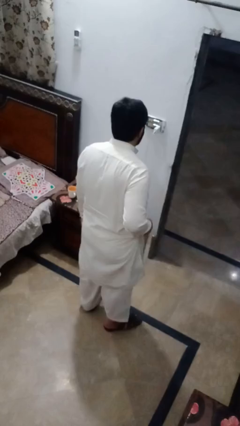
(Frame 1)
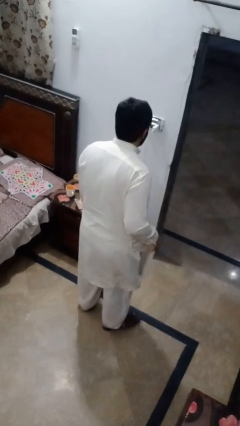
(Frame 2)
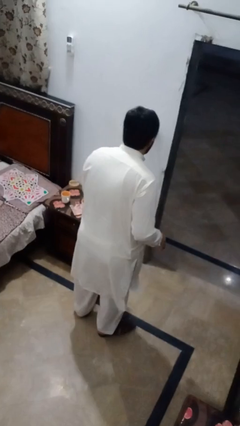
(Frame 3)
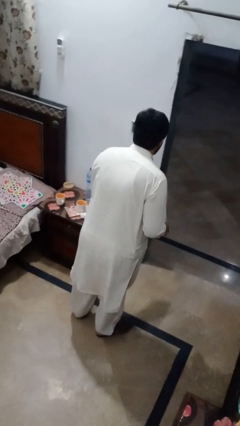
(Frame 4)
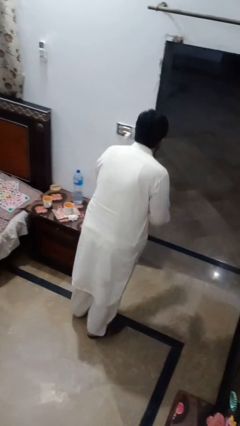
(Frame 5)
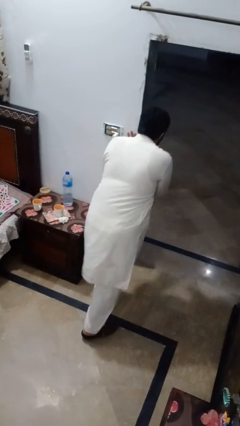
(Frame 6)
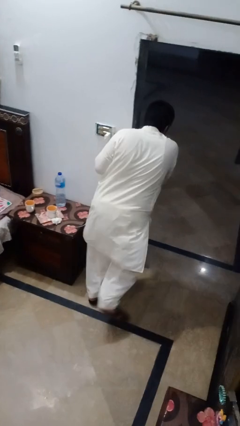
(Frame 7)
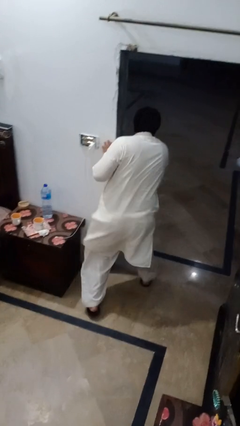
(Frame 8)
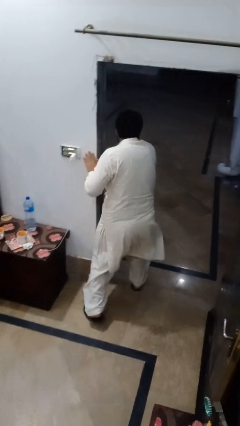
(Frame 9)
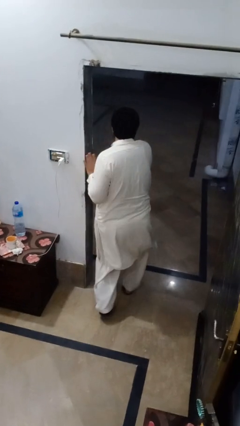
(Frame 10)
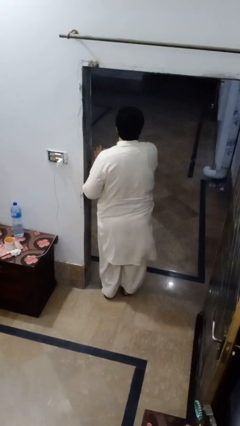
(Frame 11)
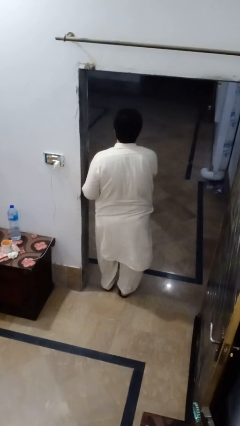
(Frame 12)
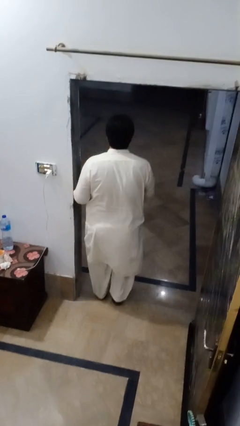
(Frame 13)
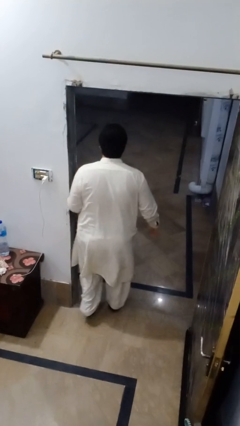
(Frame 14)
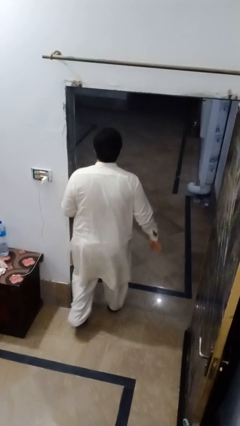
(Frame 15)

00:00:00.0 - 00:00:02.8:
person bumps into wall

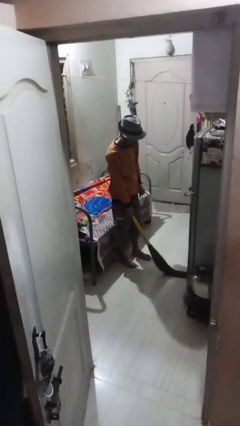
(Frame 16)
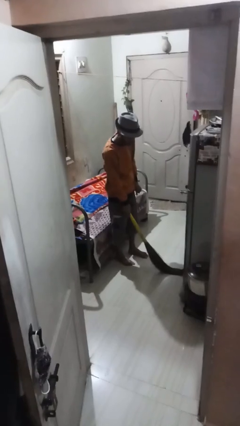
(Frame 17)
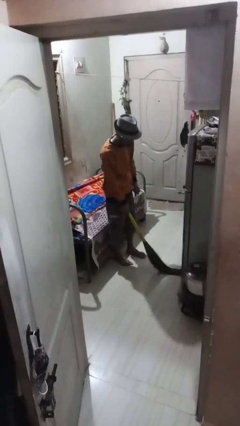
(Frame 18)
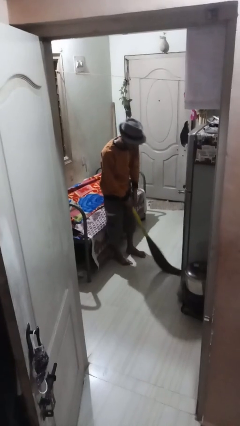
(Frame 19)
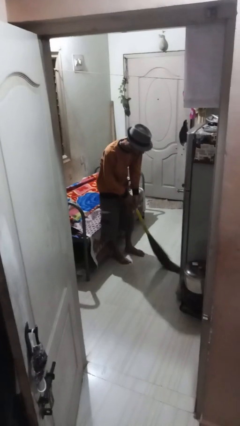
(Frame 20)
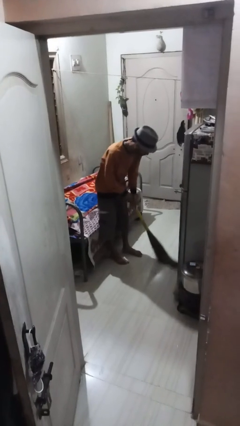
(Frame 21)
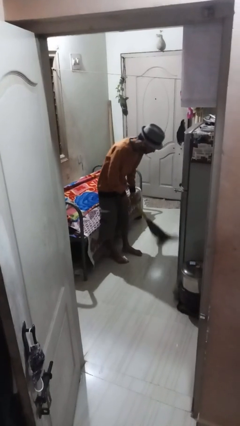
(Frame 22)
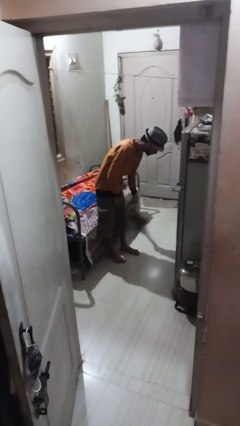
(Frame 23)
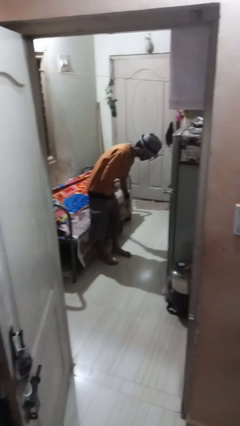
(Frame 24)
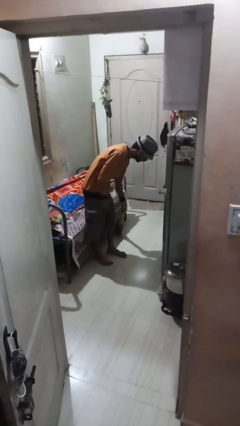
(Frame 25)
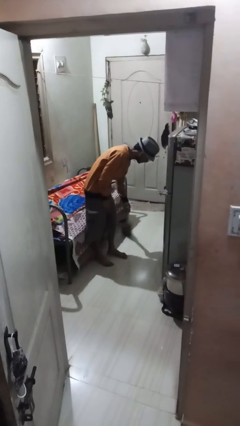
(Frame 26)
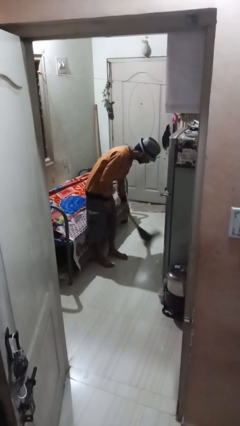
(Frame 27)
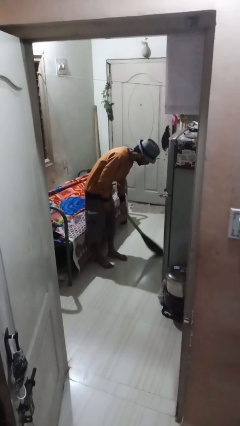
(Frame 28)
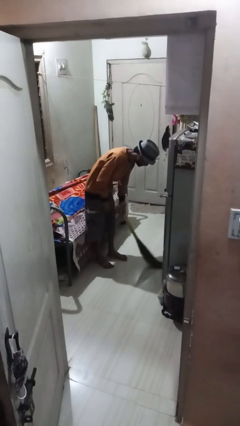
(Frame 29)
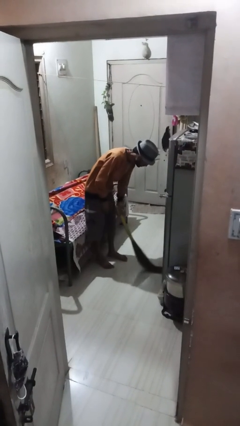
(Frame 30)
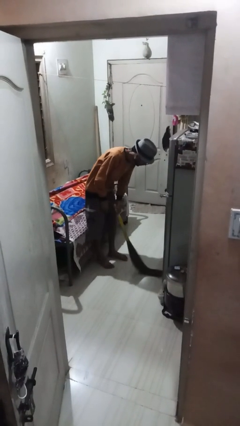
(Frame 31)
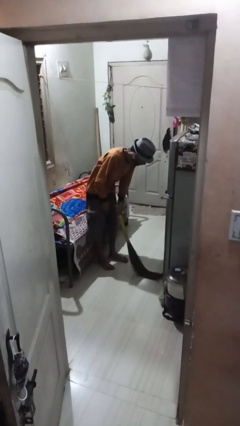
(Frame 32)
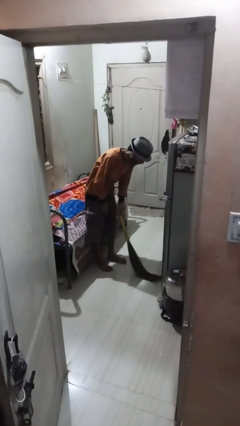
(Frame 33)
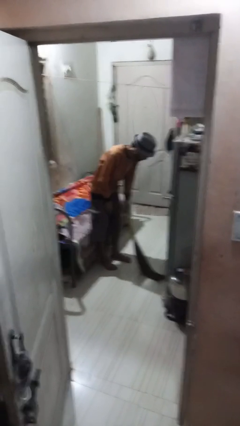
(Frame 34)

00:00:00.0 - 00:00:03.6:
person sweeps floor

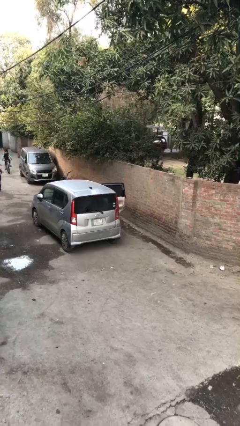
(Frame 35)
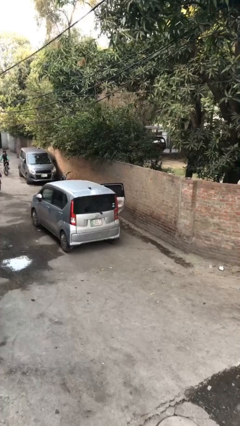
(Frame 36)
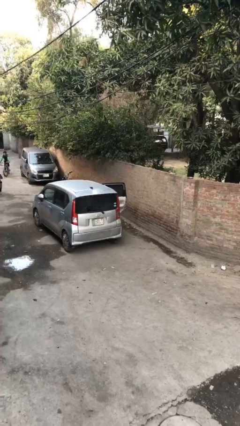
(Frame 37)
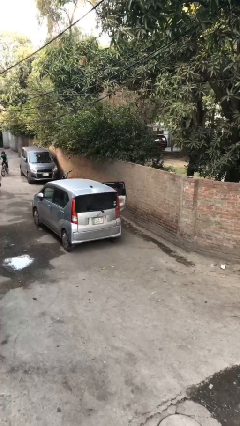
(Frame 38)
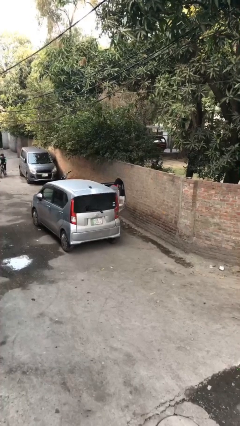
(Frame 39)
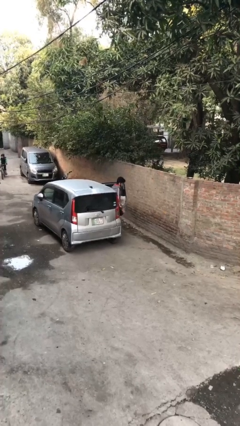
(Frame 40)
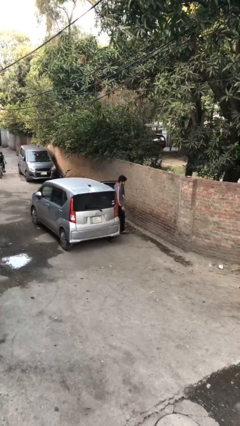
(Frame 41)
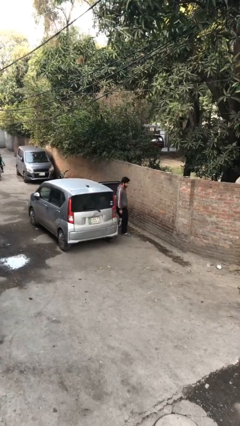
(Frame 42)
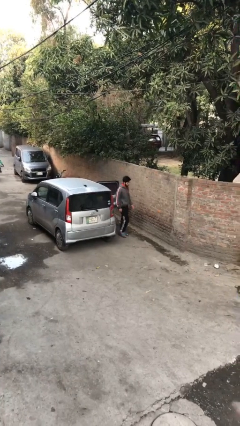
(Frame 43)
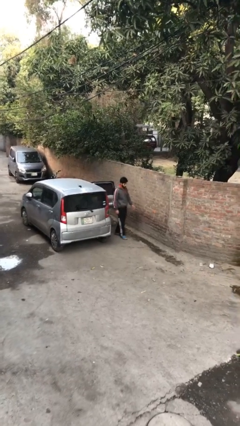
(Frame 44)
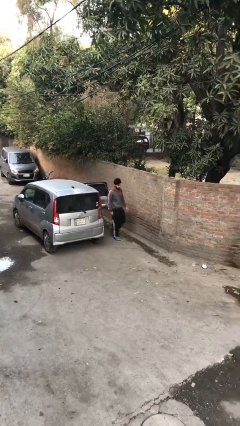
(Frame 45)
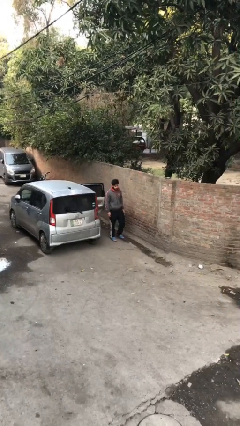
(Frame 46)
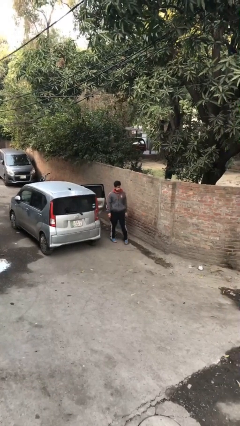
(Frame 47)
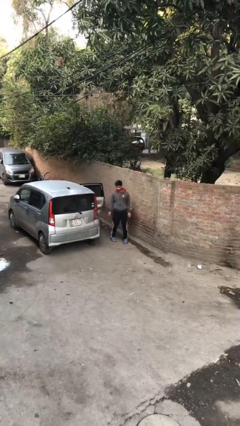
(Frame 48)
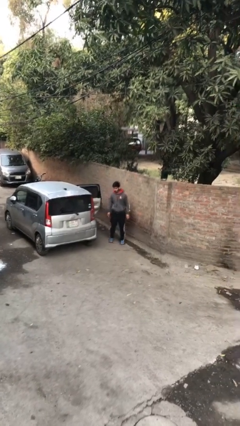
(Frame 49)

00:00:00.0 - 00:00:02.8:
person exits car

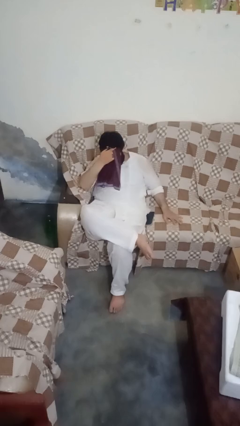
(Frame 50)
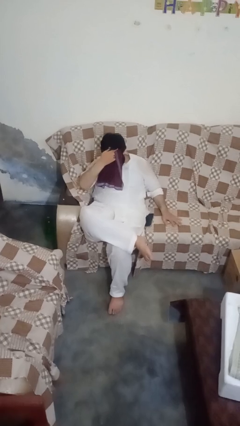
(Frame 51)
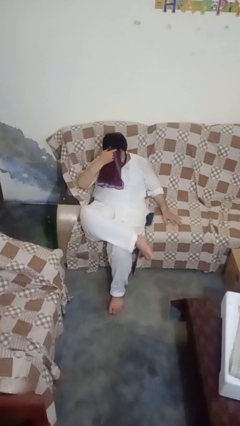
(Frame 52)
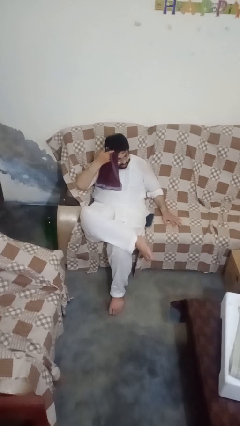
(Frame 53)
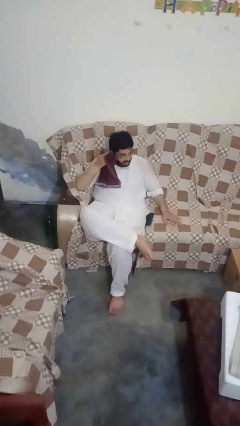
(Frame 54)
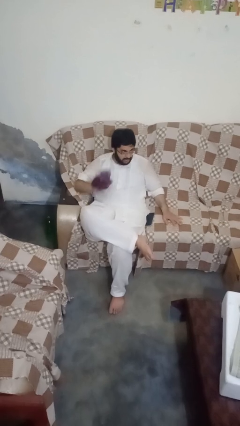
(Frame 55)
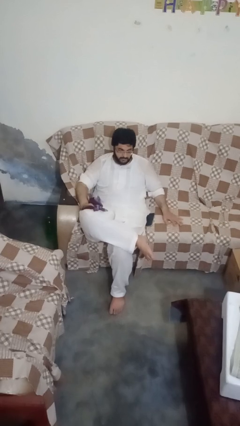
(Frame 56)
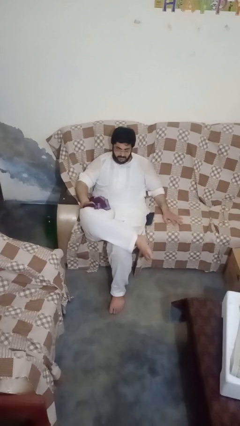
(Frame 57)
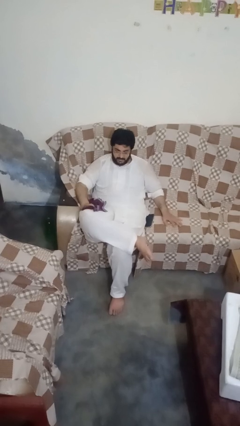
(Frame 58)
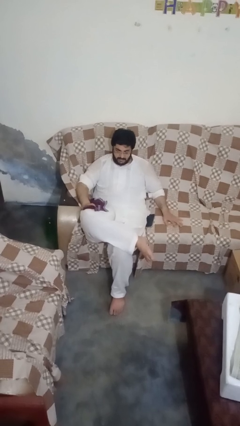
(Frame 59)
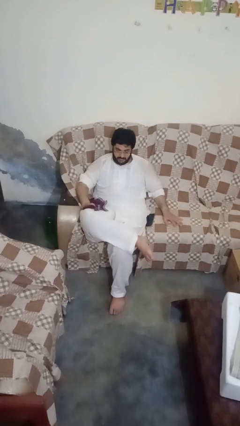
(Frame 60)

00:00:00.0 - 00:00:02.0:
person wipes mouth with napkin

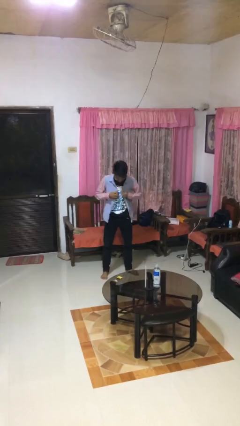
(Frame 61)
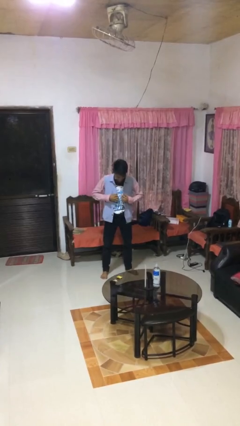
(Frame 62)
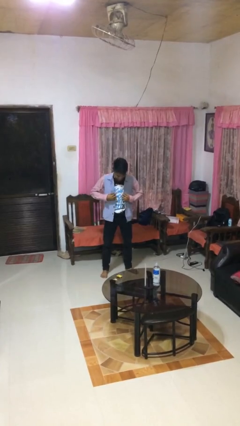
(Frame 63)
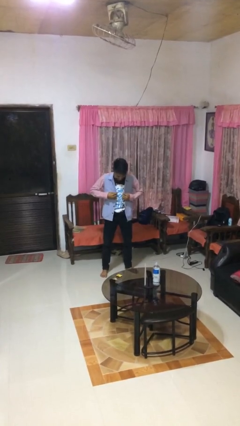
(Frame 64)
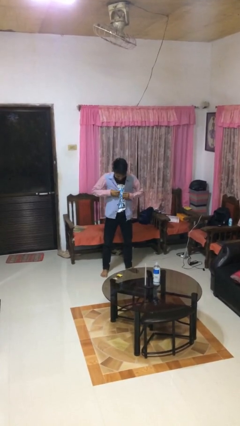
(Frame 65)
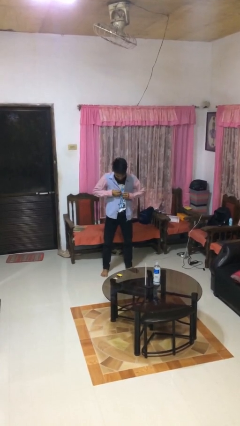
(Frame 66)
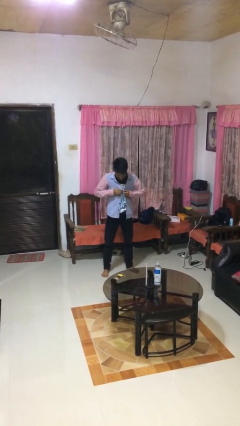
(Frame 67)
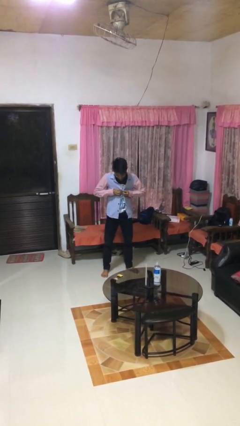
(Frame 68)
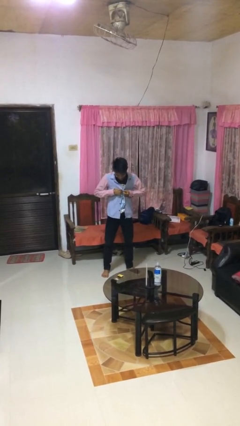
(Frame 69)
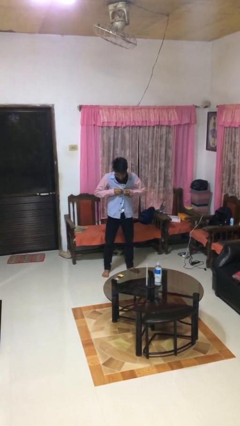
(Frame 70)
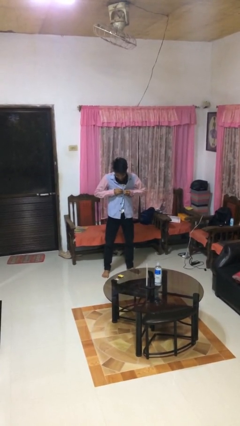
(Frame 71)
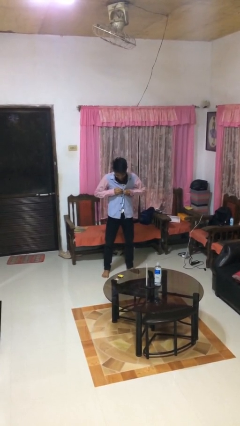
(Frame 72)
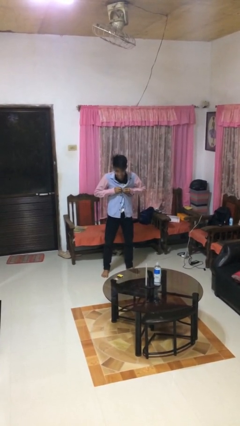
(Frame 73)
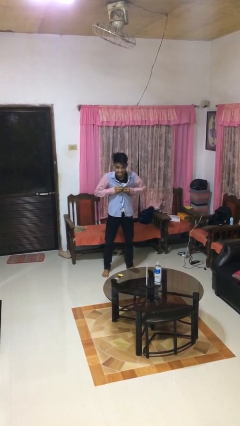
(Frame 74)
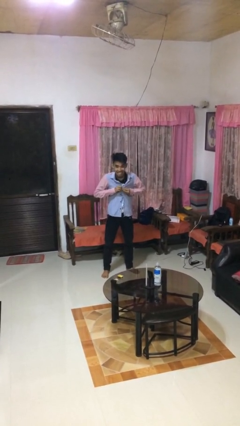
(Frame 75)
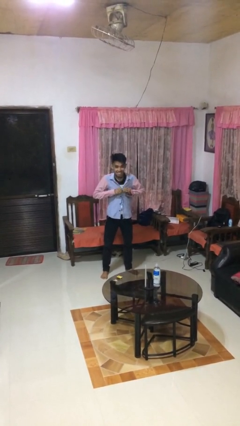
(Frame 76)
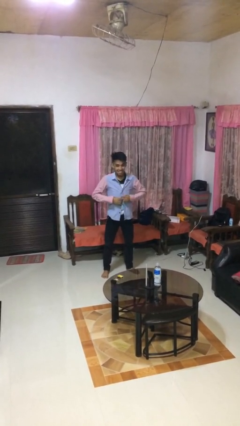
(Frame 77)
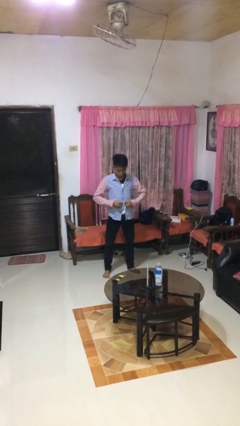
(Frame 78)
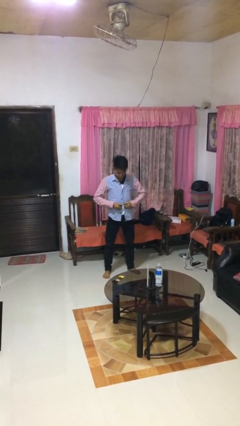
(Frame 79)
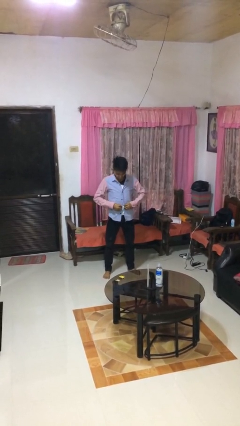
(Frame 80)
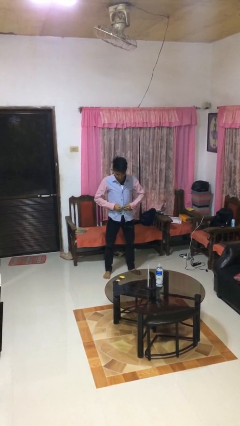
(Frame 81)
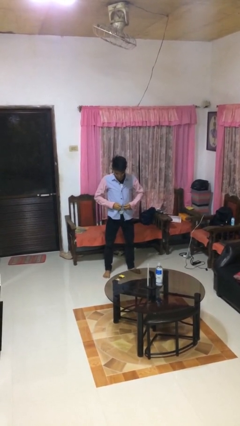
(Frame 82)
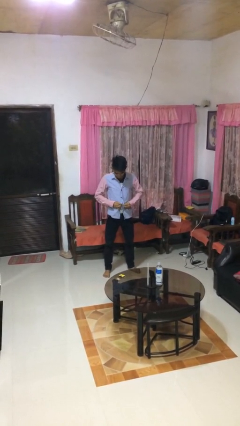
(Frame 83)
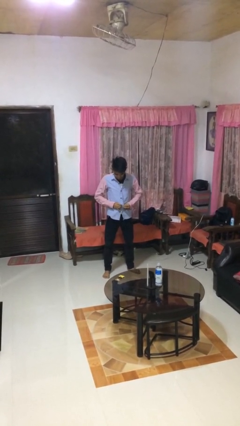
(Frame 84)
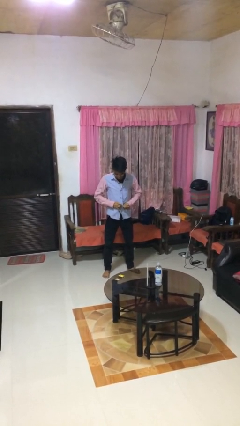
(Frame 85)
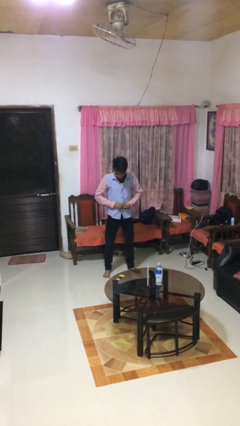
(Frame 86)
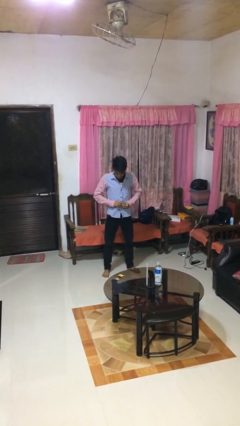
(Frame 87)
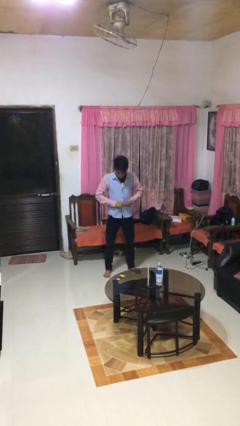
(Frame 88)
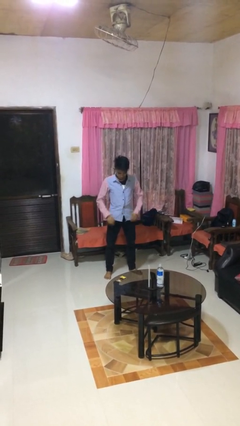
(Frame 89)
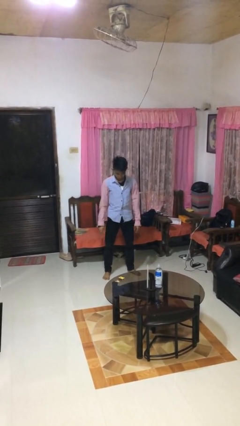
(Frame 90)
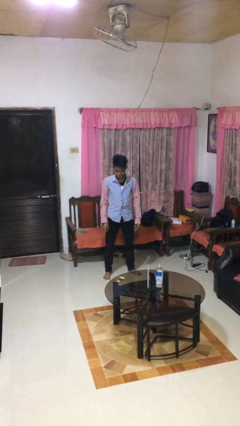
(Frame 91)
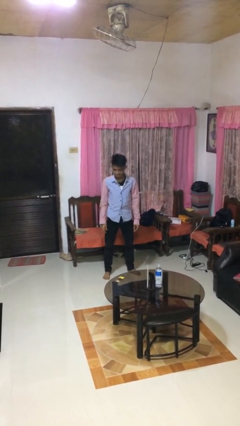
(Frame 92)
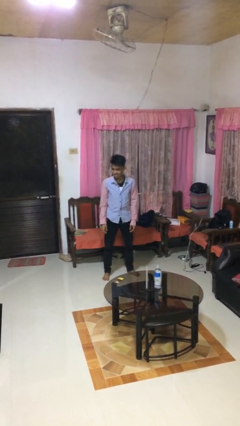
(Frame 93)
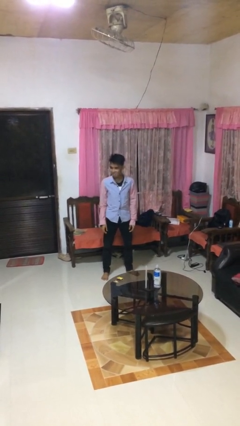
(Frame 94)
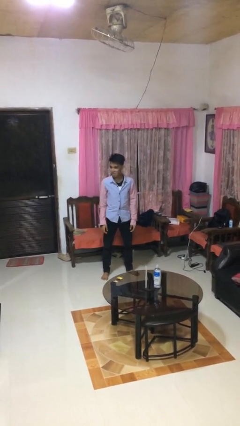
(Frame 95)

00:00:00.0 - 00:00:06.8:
person buttons shirt

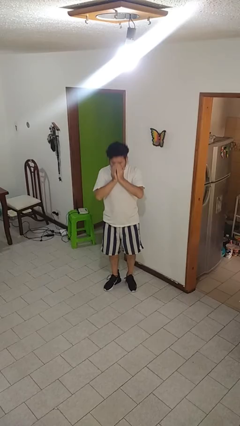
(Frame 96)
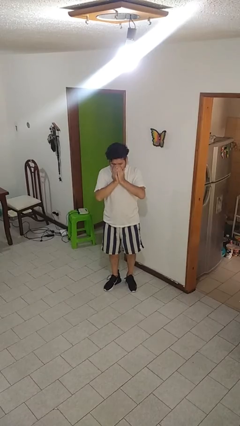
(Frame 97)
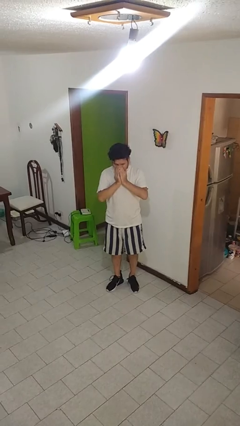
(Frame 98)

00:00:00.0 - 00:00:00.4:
person sneezes into hand
